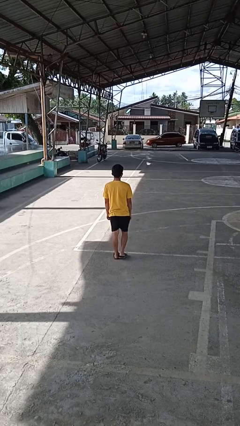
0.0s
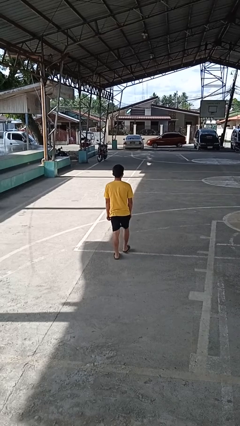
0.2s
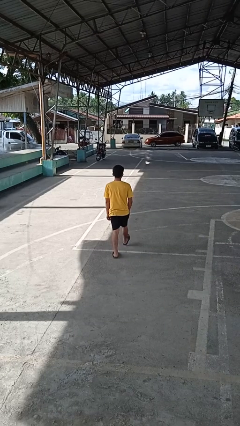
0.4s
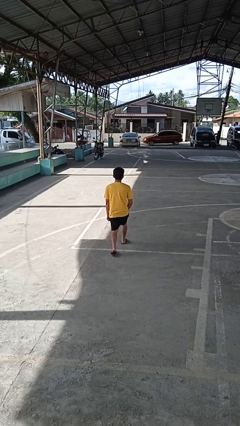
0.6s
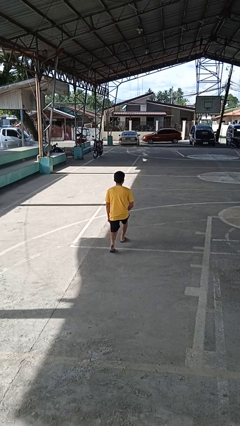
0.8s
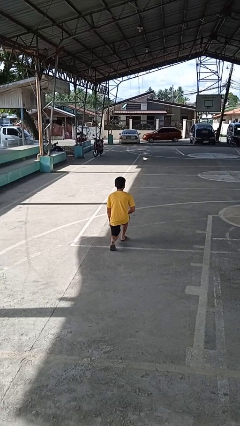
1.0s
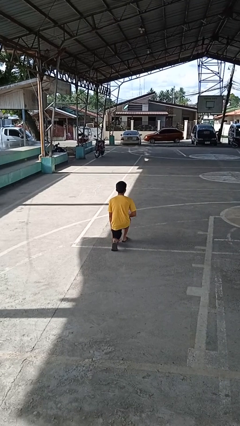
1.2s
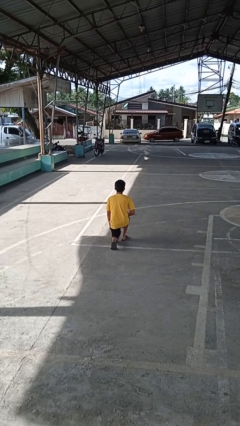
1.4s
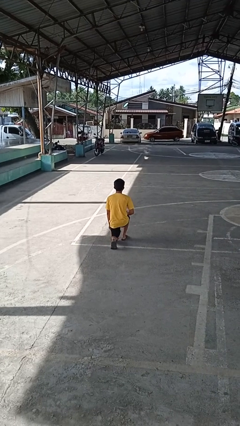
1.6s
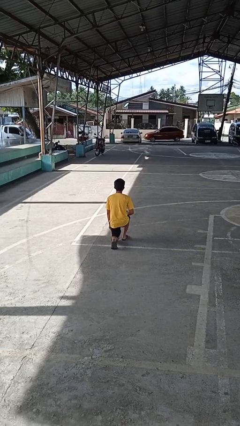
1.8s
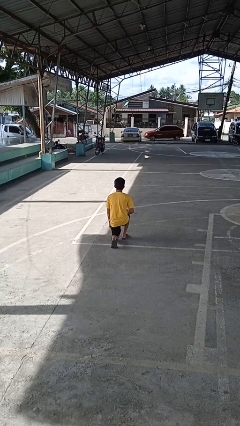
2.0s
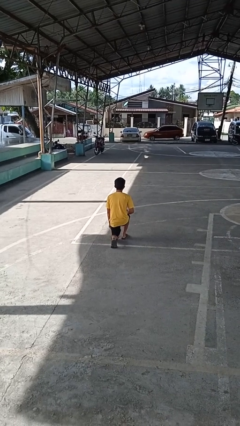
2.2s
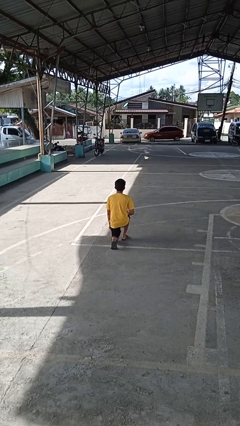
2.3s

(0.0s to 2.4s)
person kneels

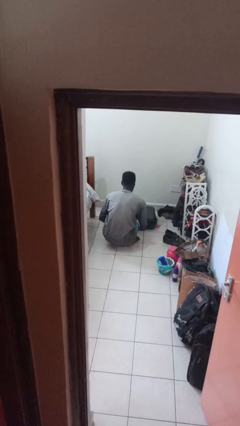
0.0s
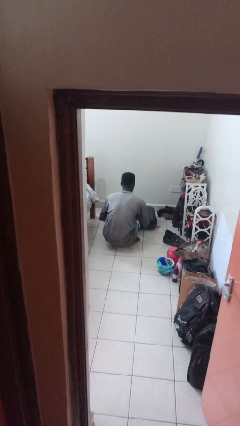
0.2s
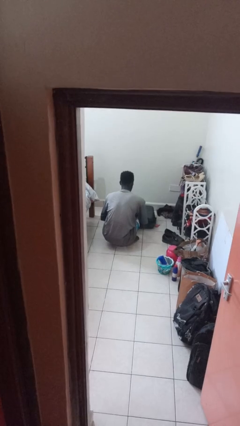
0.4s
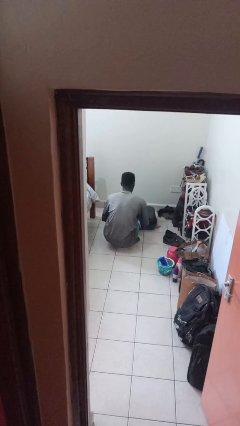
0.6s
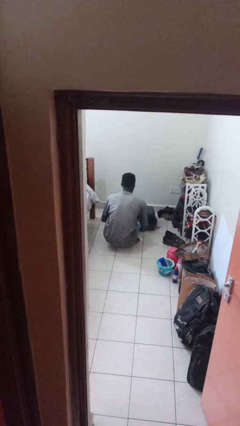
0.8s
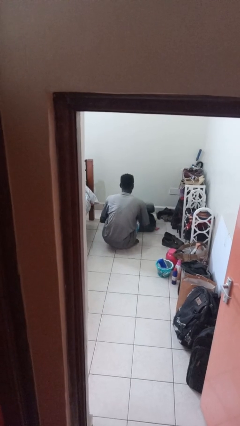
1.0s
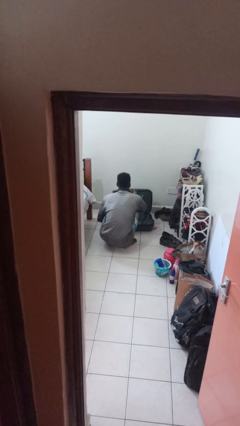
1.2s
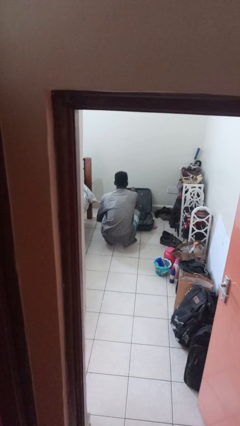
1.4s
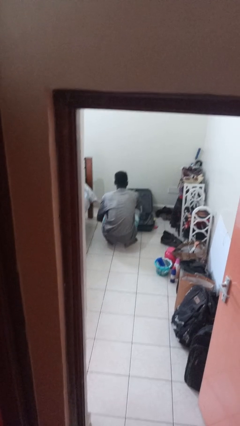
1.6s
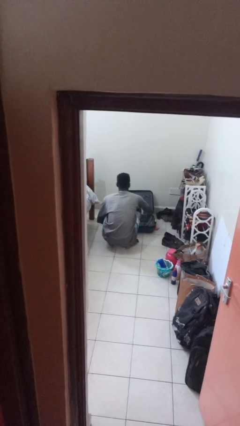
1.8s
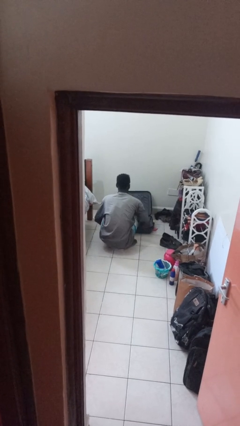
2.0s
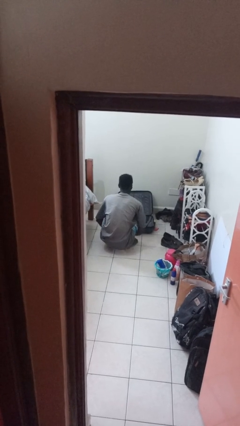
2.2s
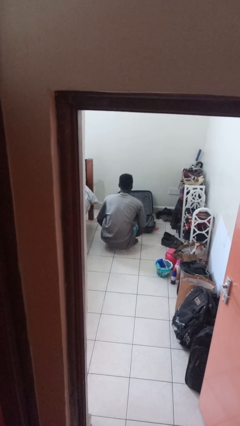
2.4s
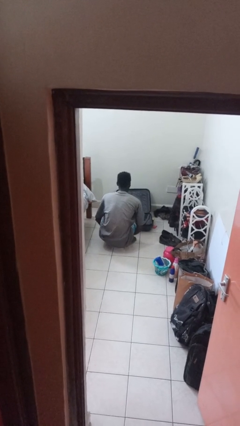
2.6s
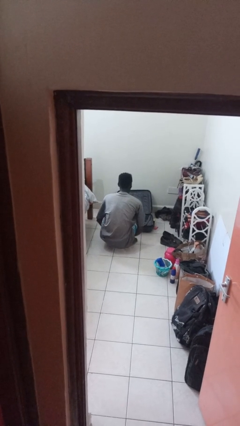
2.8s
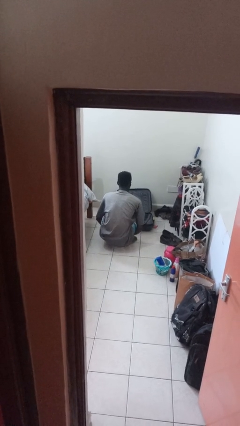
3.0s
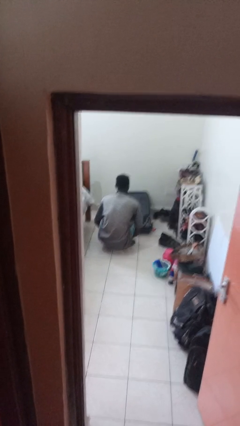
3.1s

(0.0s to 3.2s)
person opens suitcase

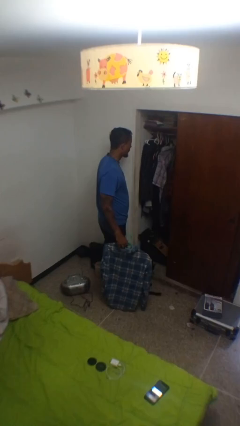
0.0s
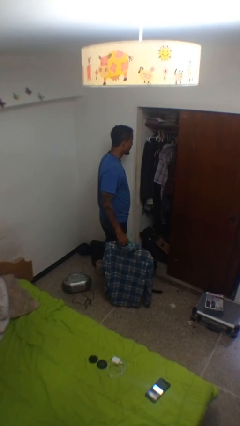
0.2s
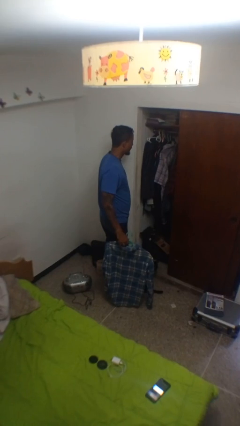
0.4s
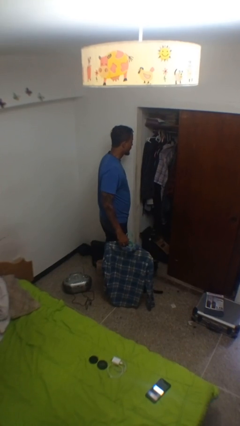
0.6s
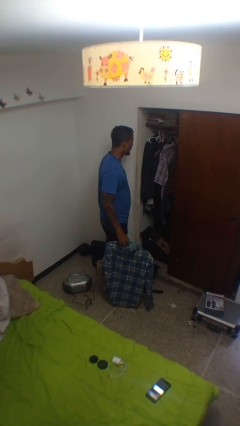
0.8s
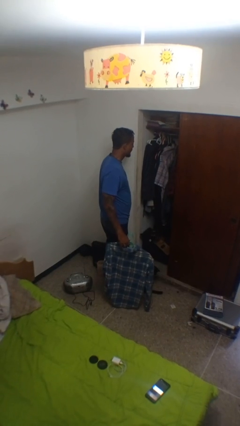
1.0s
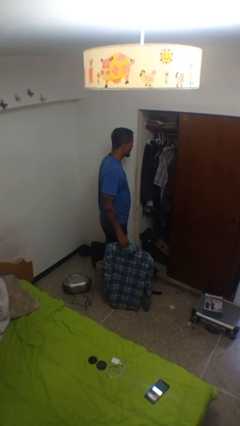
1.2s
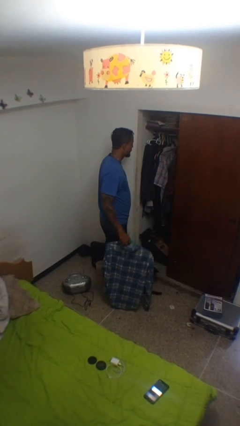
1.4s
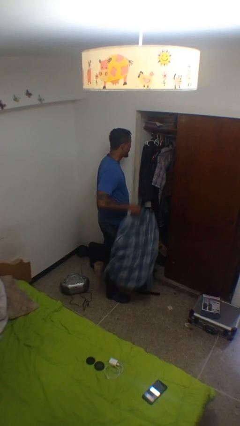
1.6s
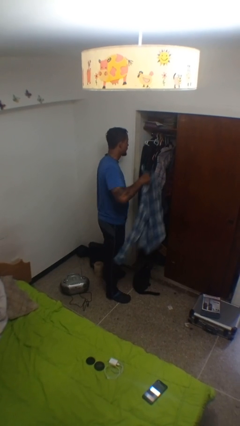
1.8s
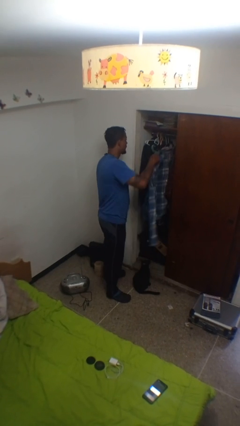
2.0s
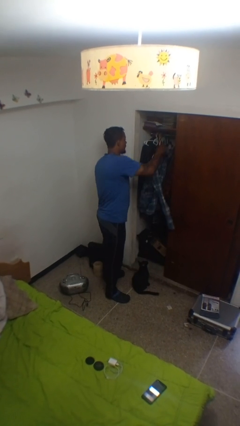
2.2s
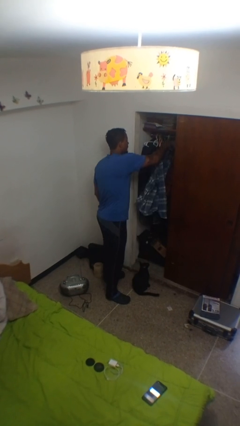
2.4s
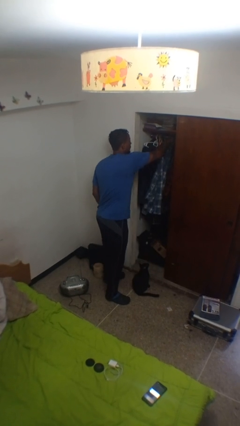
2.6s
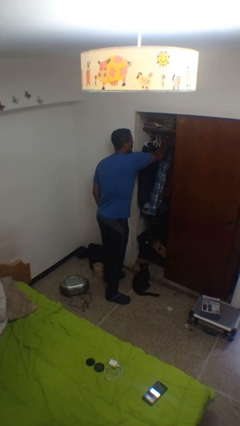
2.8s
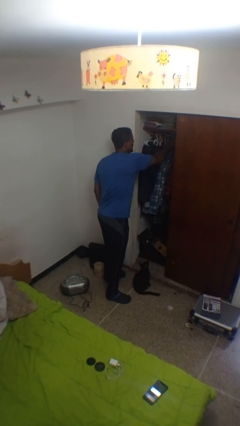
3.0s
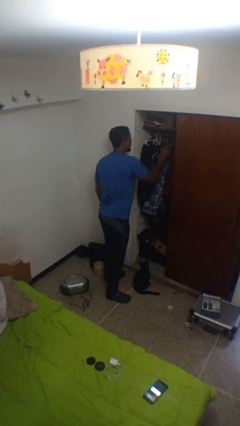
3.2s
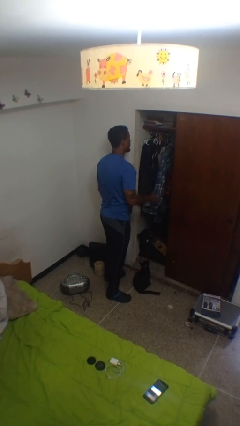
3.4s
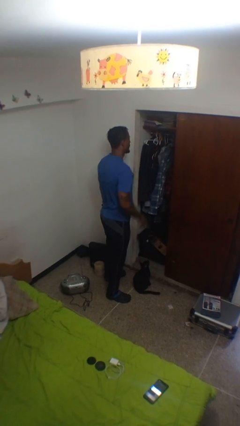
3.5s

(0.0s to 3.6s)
person puts clothes into closet

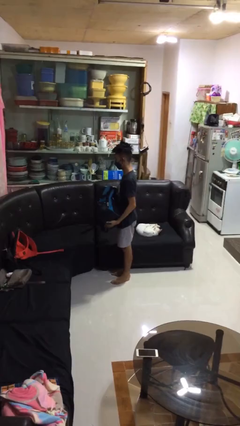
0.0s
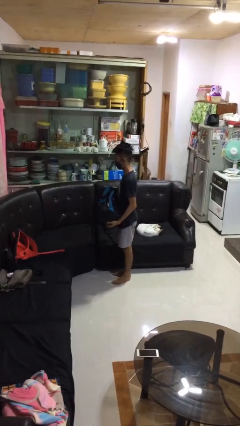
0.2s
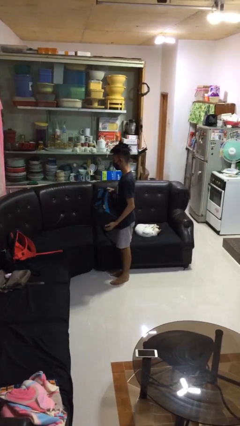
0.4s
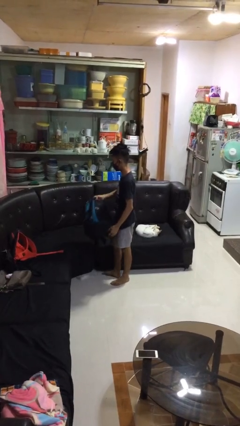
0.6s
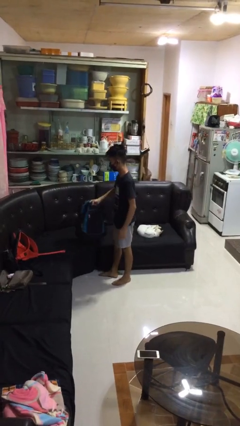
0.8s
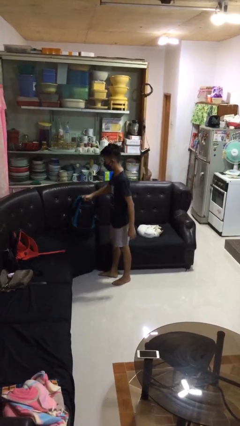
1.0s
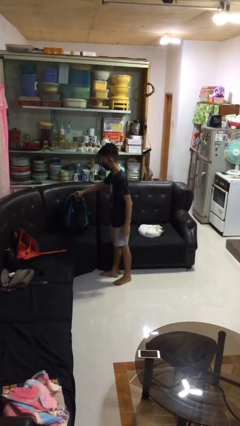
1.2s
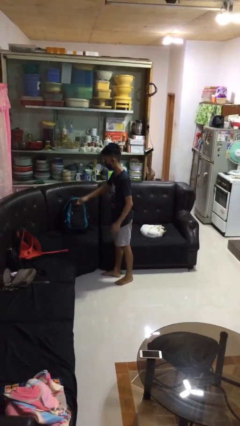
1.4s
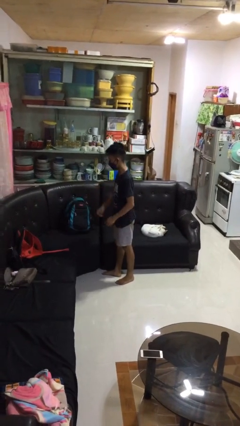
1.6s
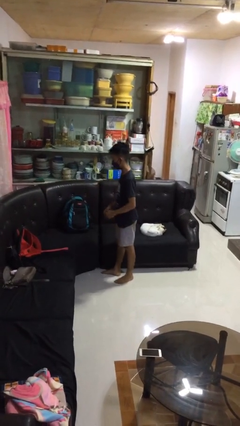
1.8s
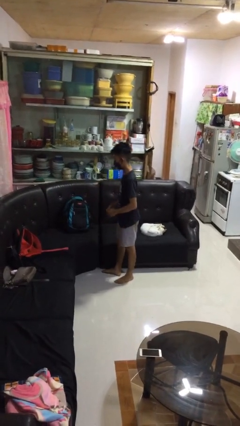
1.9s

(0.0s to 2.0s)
person puts down object on couch

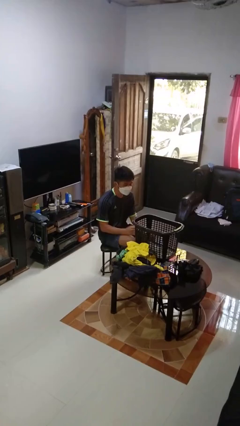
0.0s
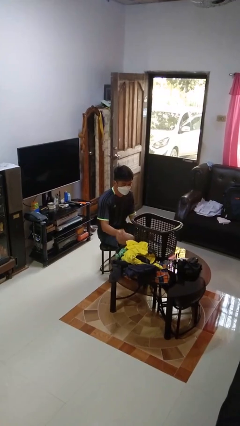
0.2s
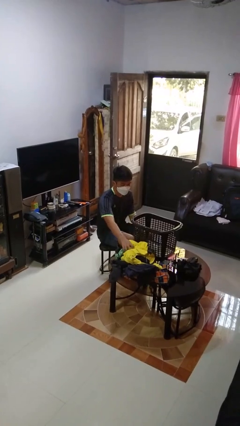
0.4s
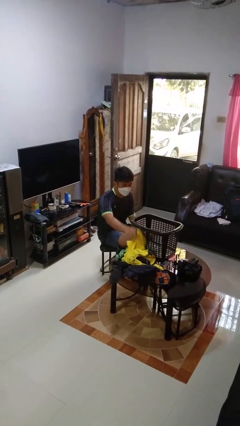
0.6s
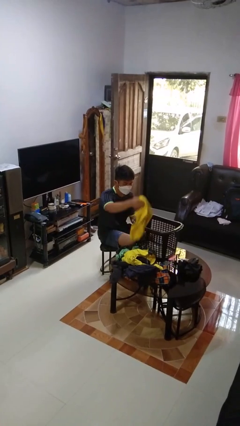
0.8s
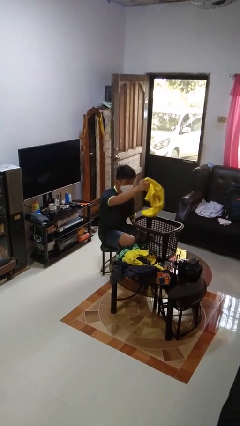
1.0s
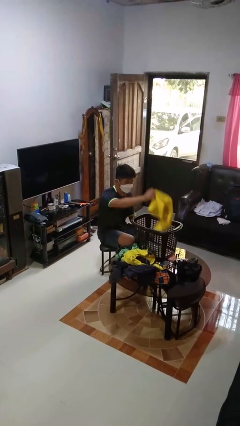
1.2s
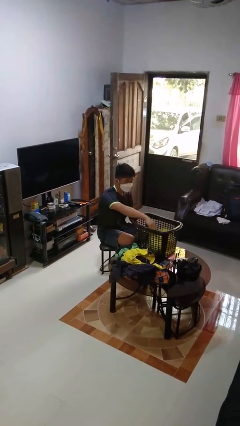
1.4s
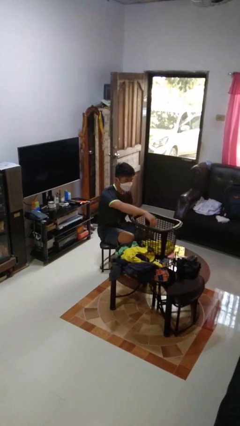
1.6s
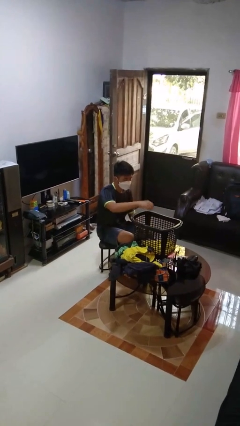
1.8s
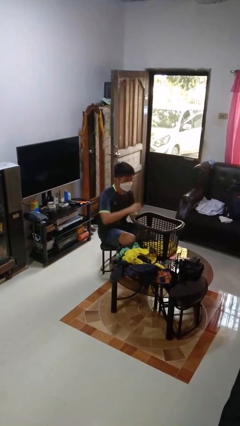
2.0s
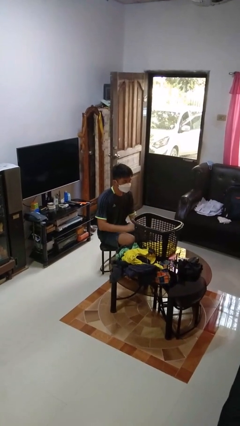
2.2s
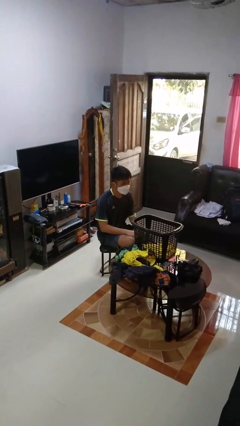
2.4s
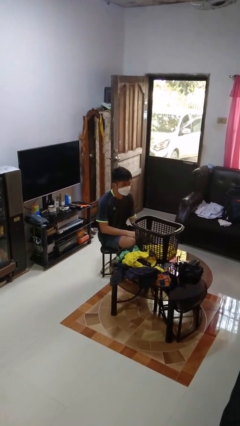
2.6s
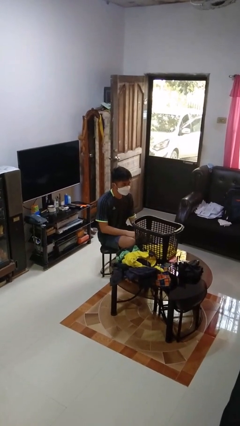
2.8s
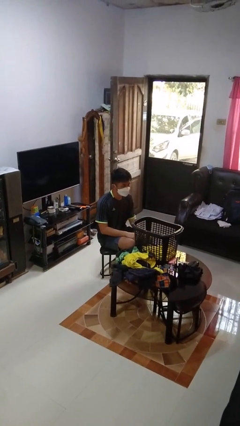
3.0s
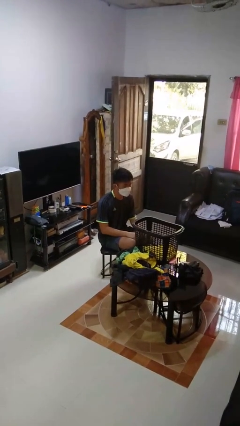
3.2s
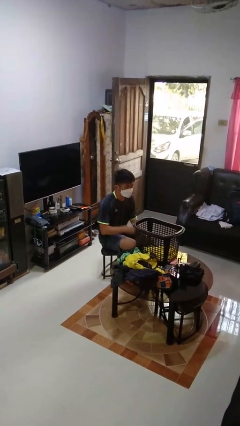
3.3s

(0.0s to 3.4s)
person puts object into basket

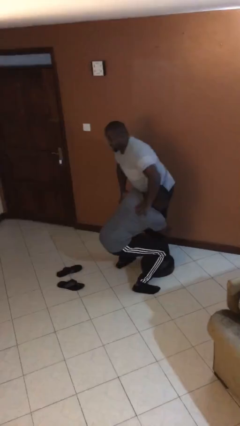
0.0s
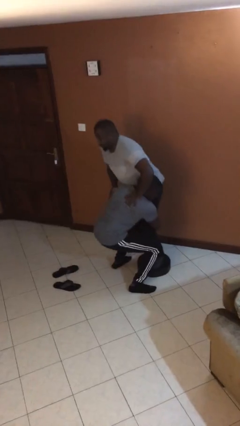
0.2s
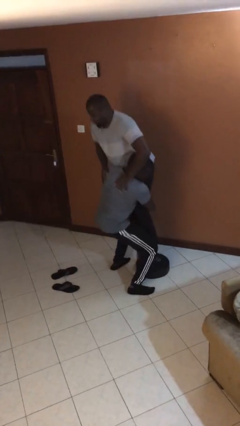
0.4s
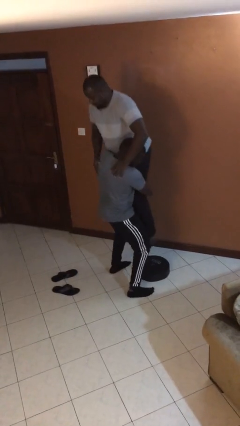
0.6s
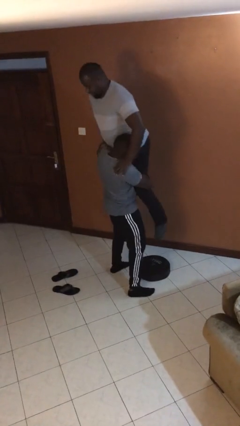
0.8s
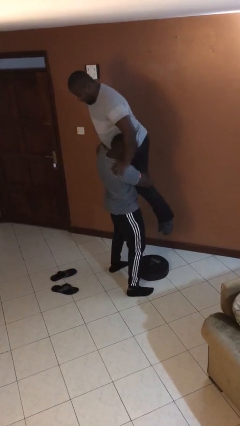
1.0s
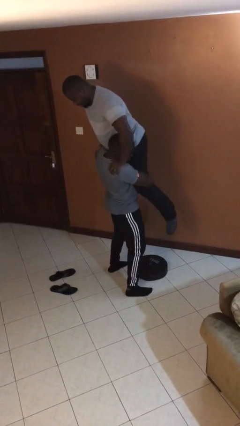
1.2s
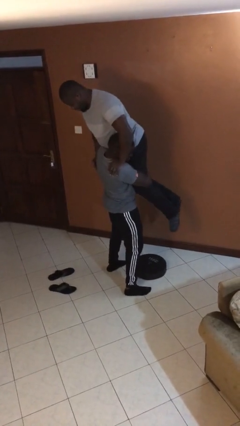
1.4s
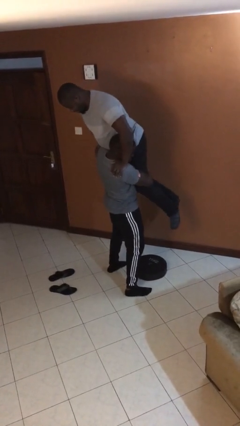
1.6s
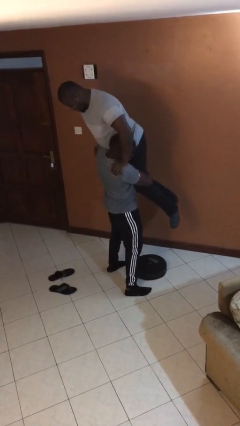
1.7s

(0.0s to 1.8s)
person picks up person

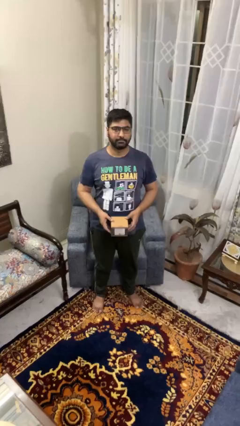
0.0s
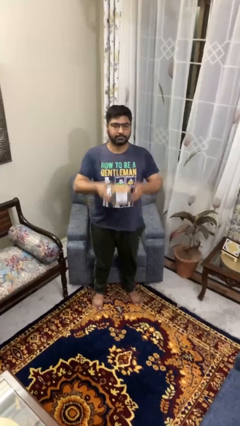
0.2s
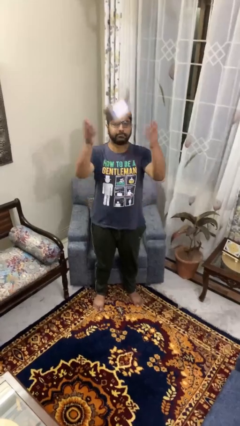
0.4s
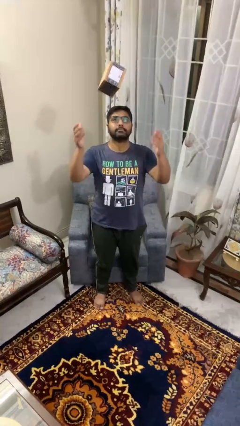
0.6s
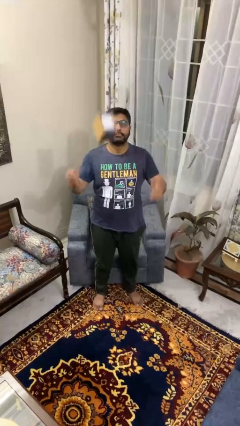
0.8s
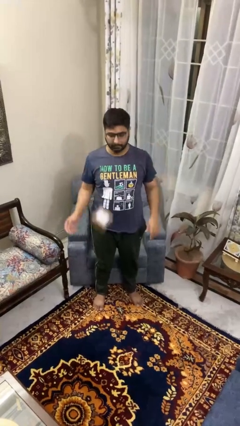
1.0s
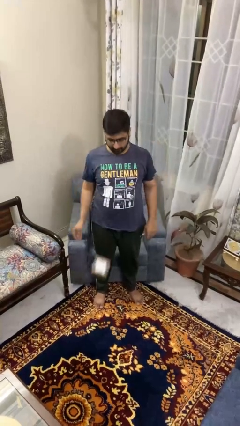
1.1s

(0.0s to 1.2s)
person throws object into air
